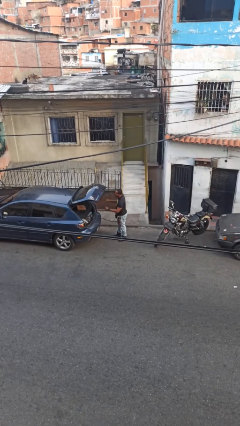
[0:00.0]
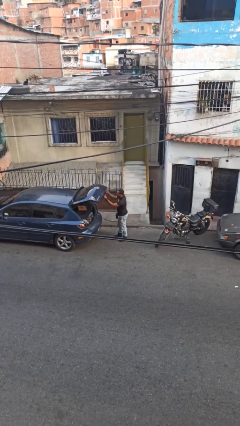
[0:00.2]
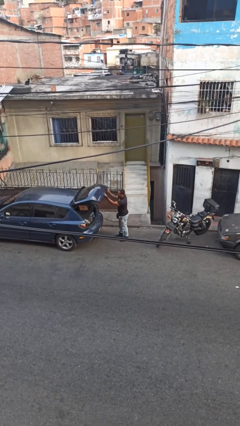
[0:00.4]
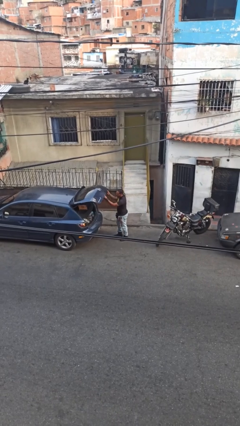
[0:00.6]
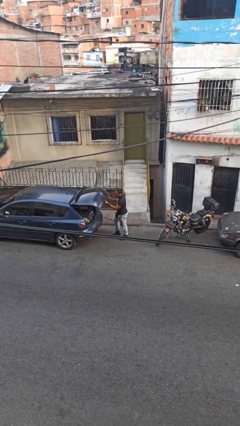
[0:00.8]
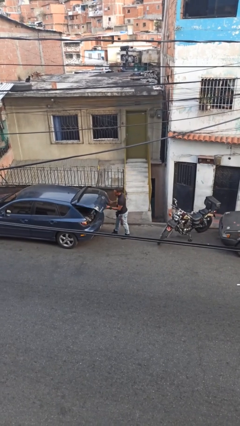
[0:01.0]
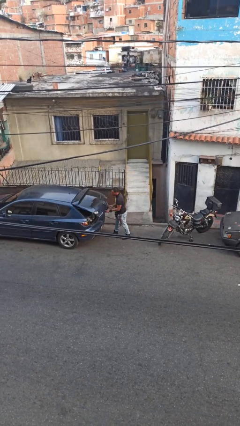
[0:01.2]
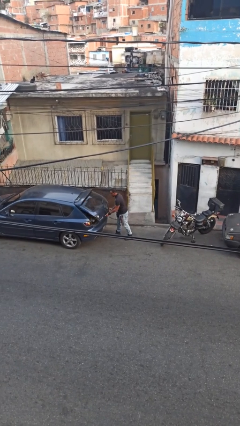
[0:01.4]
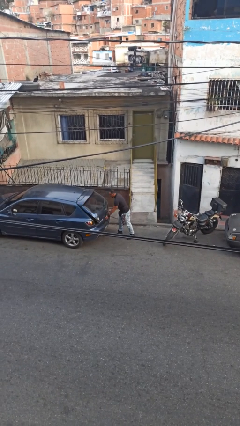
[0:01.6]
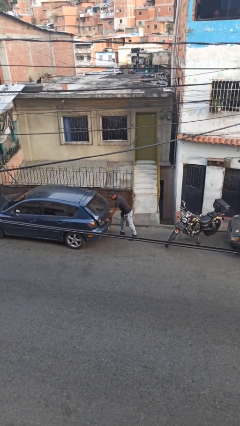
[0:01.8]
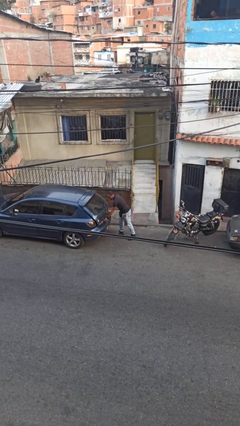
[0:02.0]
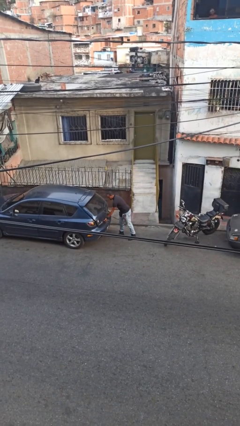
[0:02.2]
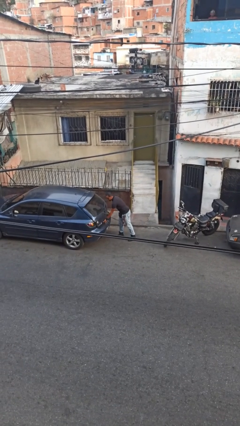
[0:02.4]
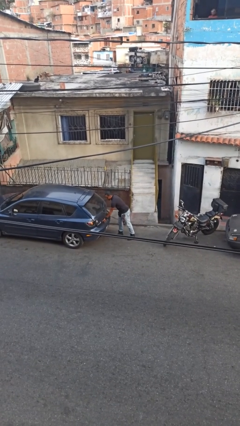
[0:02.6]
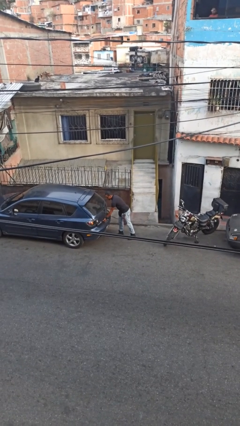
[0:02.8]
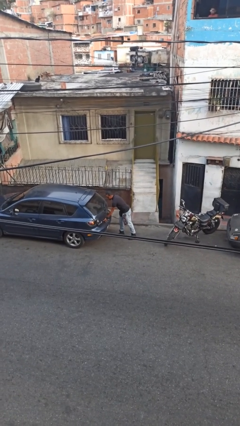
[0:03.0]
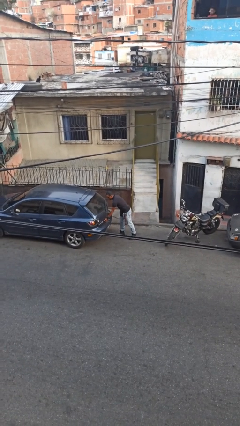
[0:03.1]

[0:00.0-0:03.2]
person closes car trunk

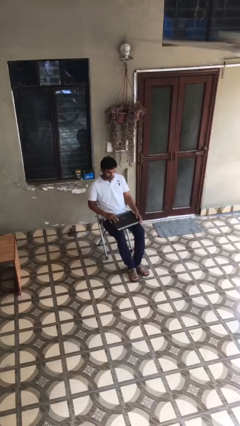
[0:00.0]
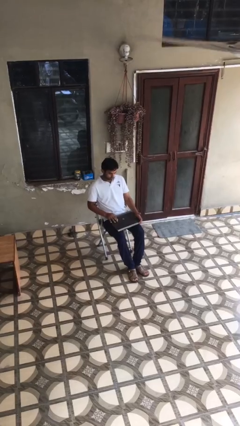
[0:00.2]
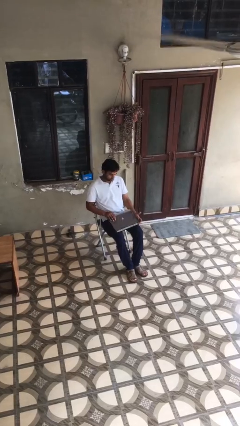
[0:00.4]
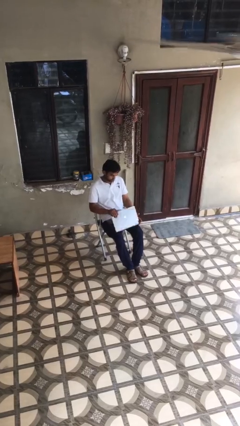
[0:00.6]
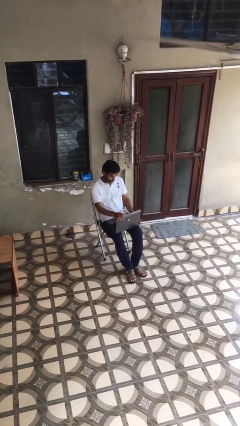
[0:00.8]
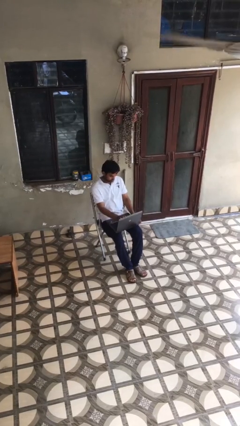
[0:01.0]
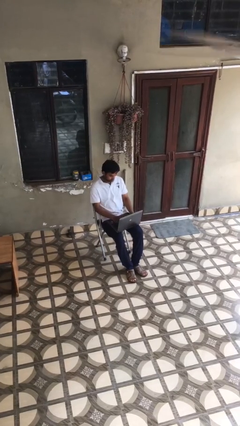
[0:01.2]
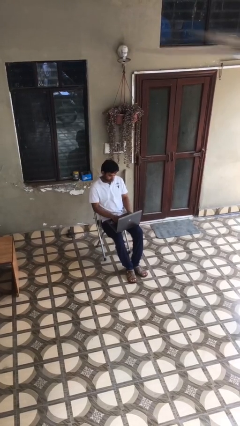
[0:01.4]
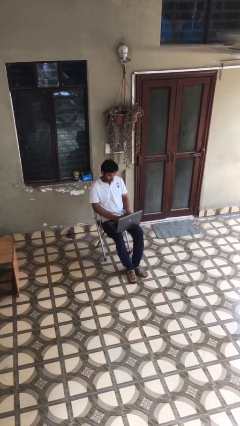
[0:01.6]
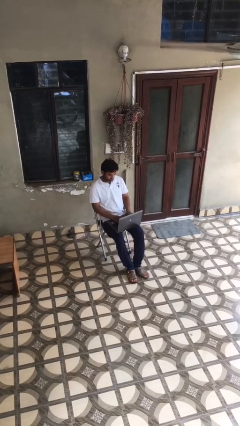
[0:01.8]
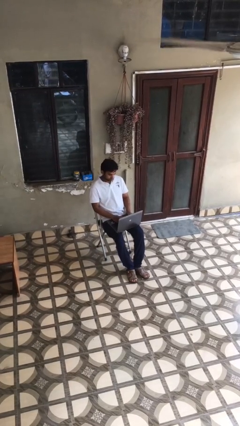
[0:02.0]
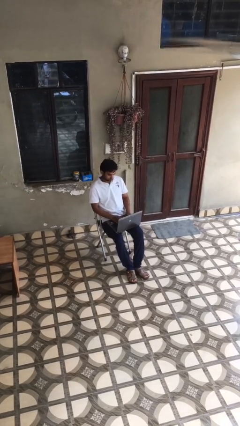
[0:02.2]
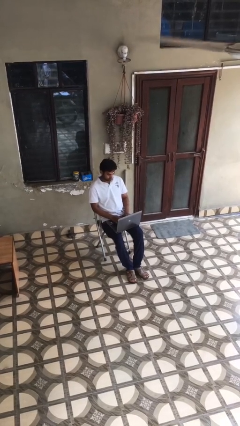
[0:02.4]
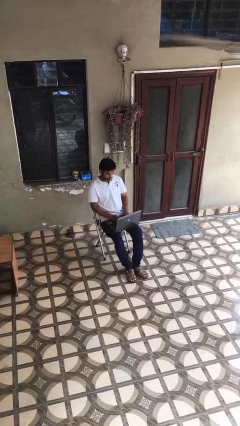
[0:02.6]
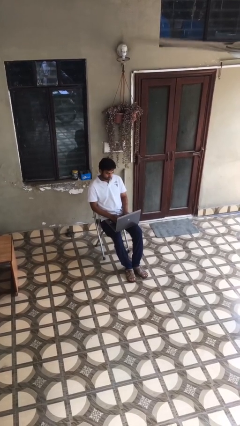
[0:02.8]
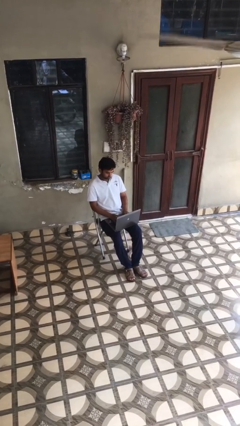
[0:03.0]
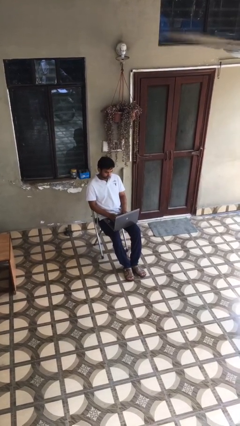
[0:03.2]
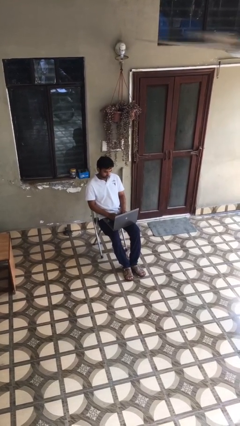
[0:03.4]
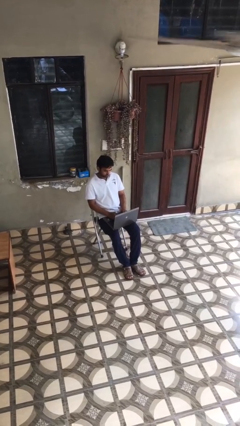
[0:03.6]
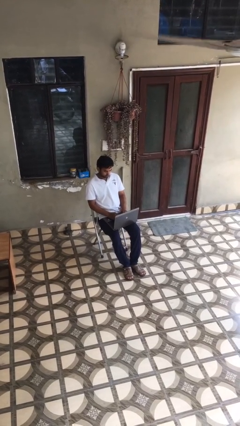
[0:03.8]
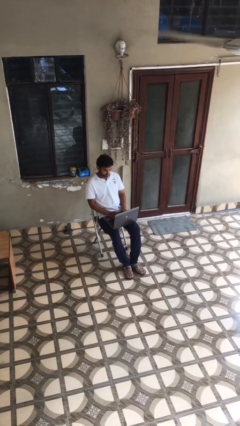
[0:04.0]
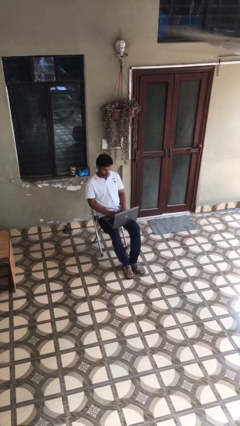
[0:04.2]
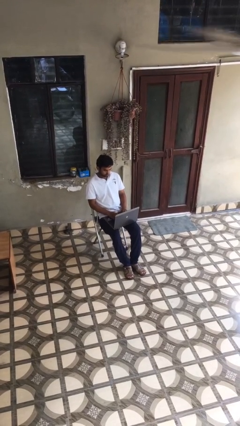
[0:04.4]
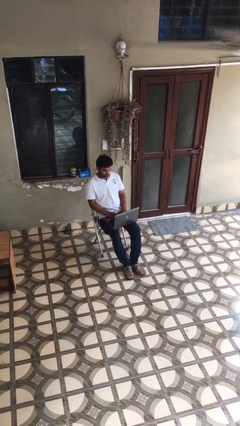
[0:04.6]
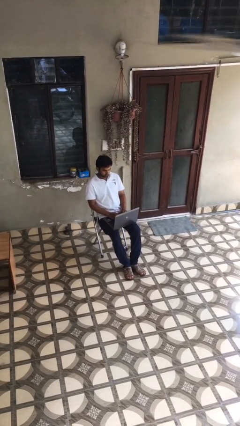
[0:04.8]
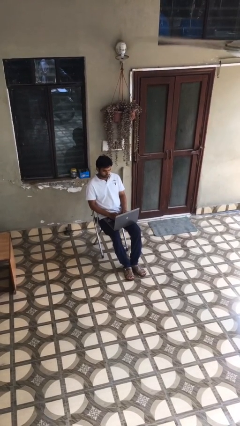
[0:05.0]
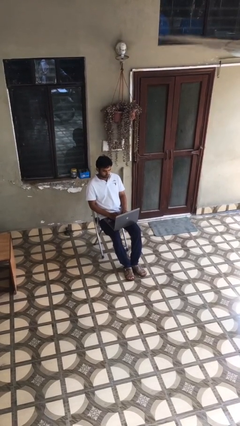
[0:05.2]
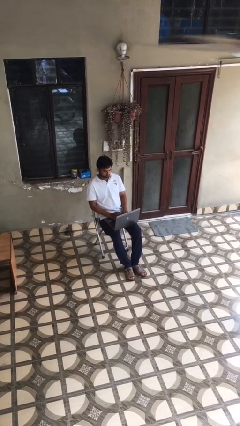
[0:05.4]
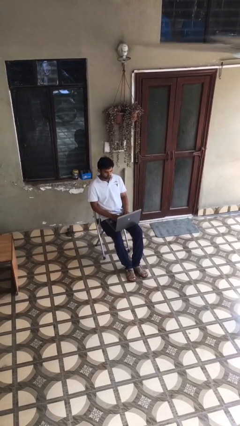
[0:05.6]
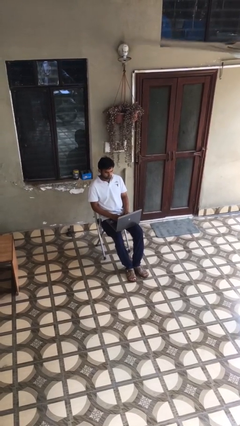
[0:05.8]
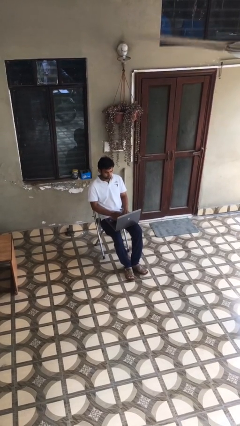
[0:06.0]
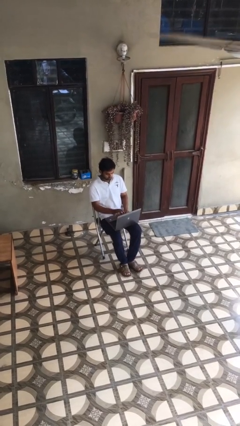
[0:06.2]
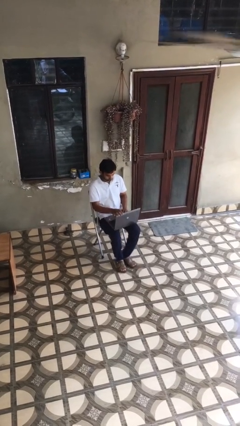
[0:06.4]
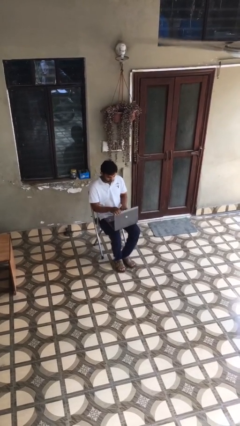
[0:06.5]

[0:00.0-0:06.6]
person interacts with laptop

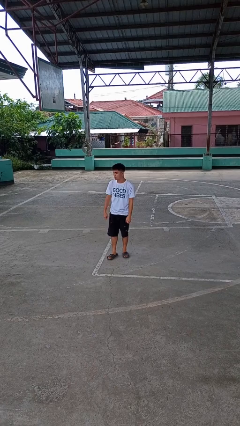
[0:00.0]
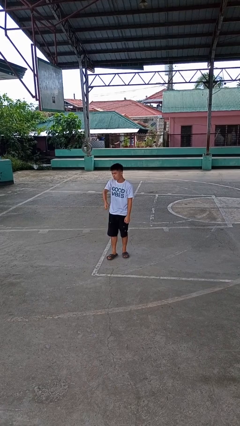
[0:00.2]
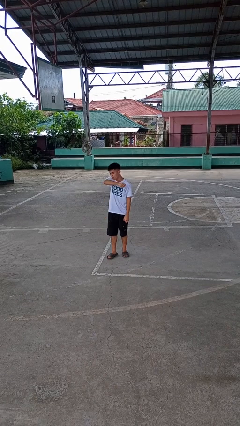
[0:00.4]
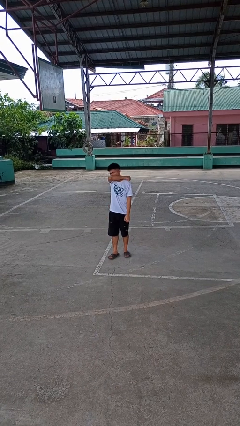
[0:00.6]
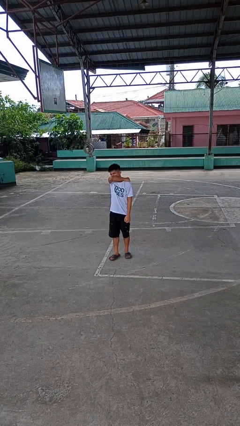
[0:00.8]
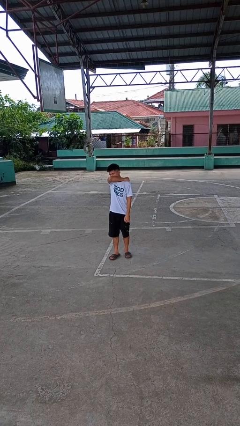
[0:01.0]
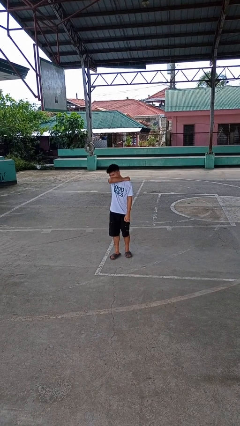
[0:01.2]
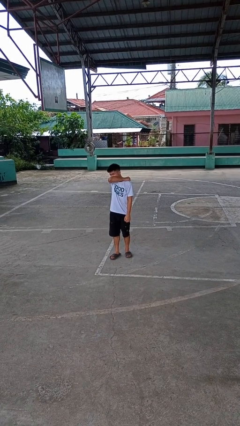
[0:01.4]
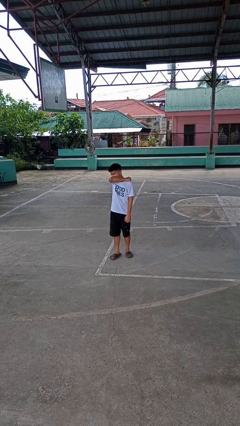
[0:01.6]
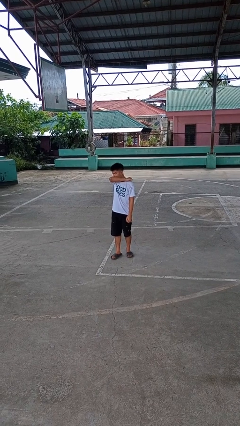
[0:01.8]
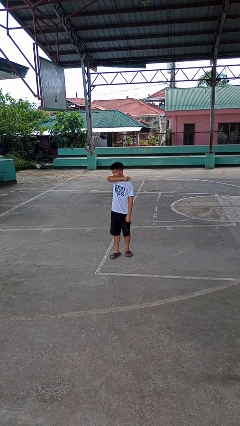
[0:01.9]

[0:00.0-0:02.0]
person sneezes into arm

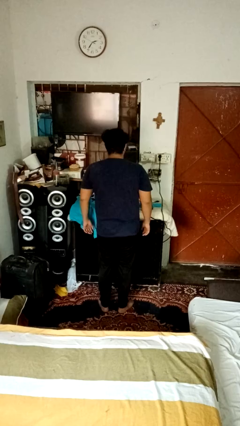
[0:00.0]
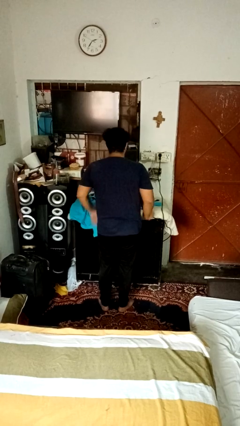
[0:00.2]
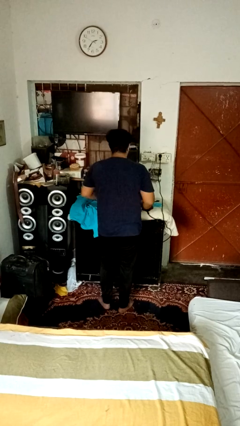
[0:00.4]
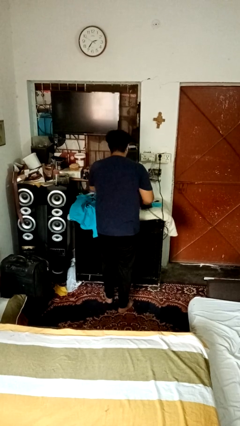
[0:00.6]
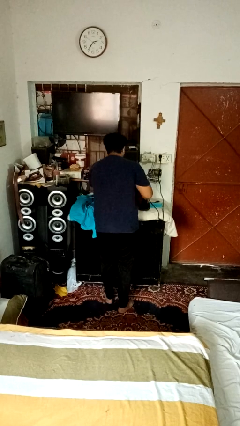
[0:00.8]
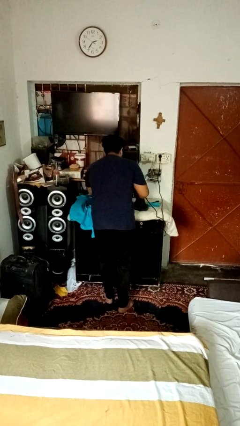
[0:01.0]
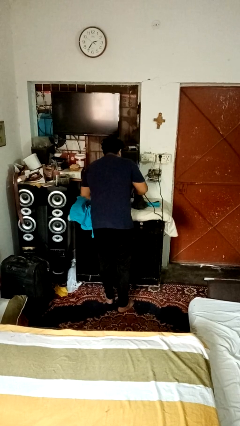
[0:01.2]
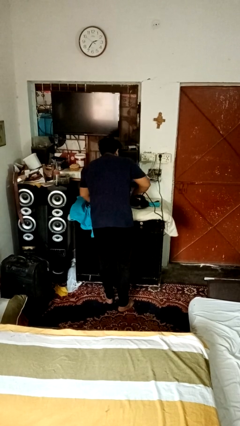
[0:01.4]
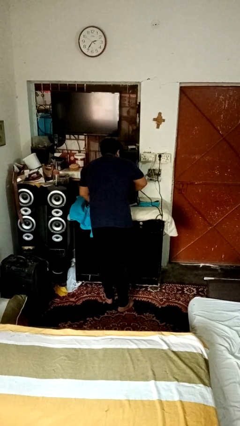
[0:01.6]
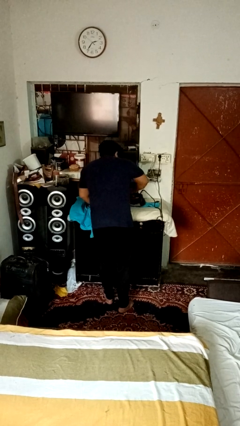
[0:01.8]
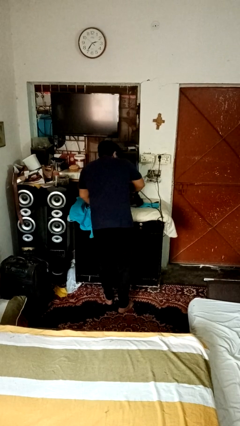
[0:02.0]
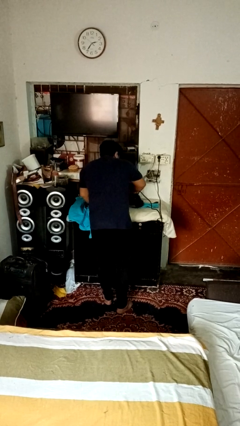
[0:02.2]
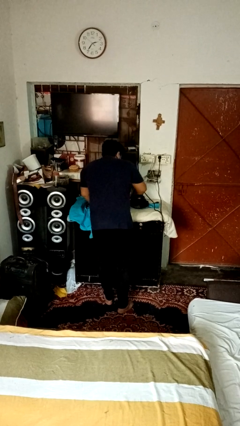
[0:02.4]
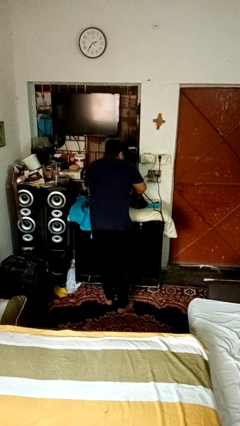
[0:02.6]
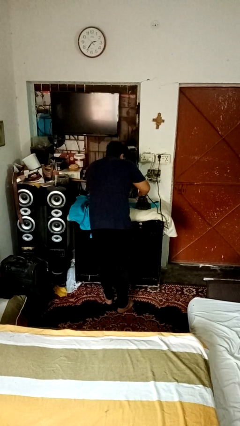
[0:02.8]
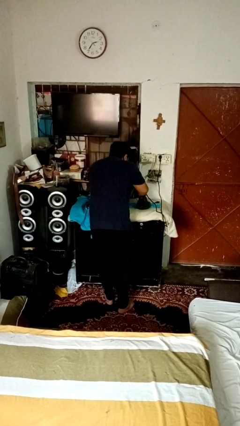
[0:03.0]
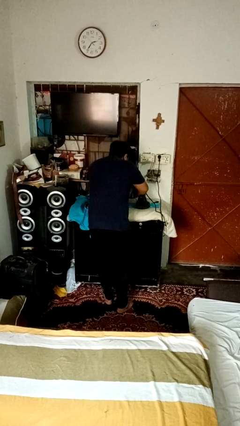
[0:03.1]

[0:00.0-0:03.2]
person irons clothes

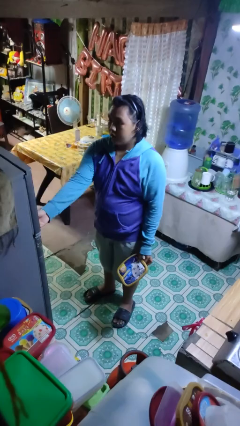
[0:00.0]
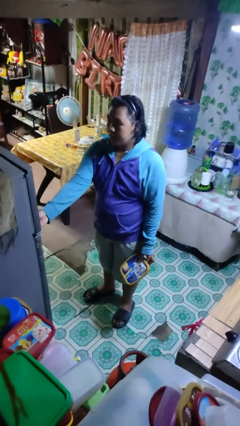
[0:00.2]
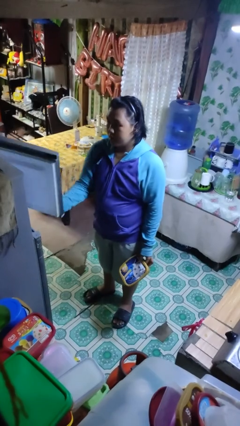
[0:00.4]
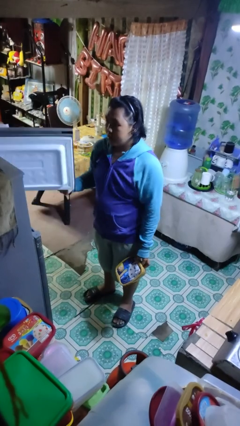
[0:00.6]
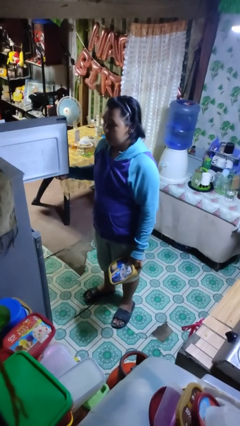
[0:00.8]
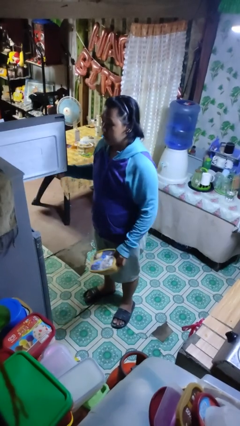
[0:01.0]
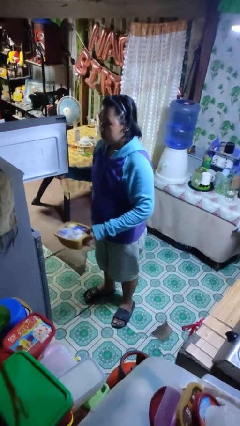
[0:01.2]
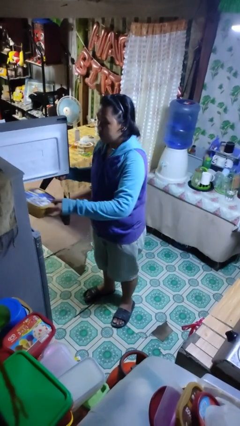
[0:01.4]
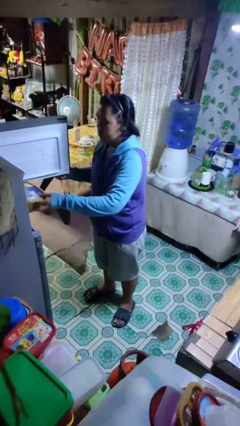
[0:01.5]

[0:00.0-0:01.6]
person opens refrigerator

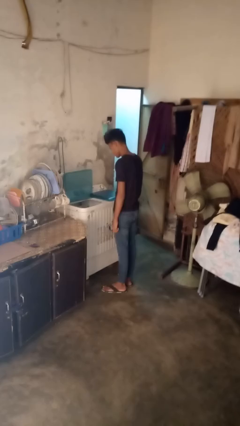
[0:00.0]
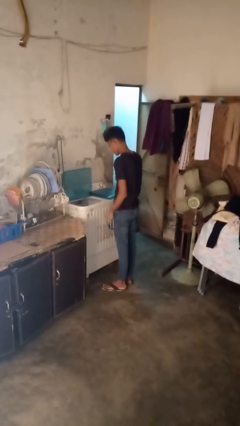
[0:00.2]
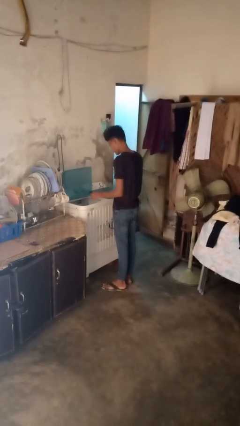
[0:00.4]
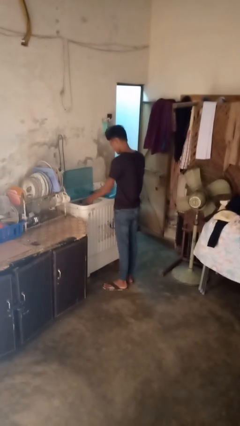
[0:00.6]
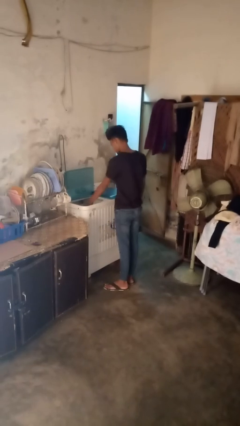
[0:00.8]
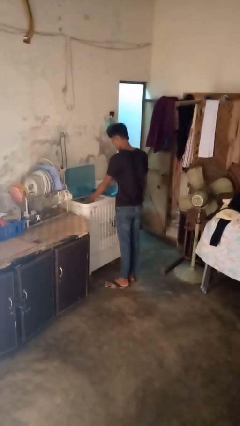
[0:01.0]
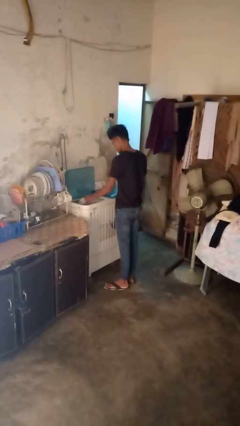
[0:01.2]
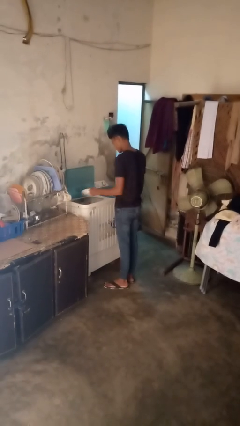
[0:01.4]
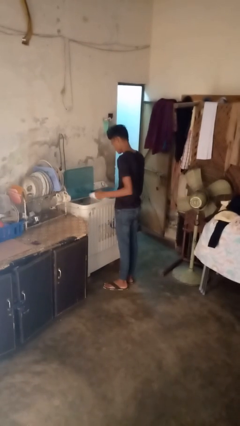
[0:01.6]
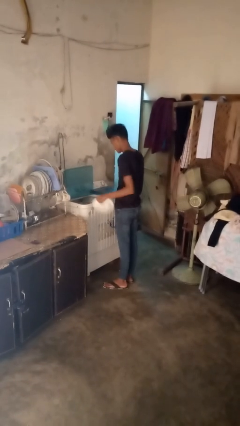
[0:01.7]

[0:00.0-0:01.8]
person unloads dishwasher
